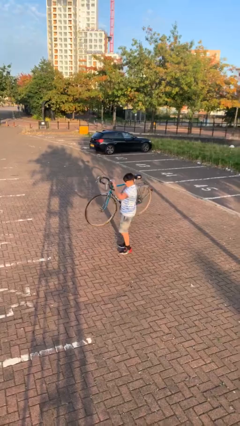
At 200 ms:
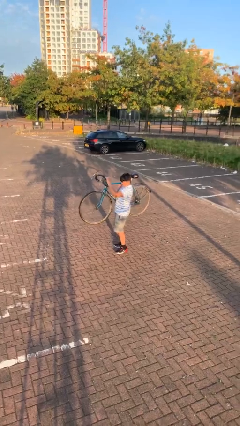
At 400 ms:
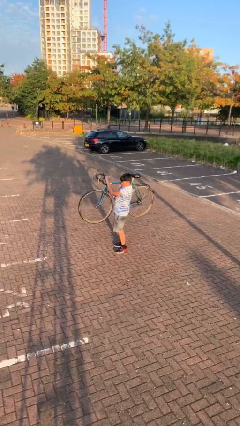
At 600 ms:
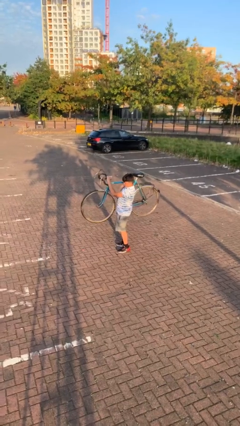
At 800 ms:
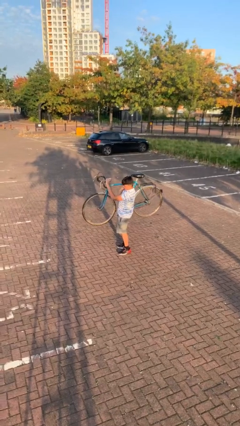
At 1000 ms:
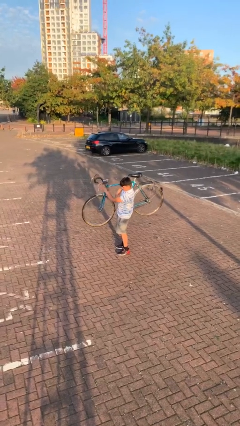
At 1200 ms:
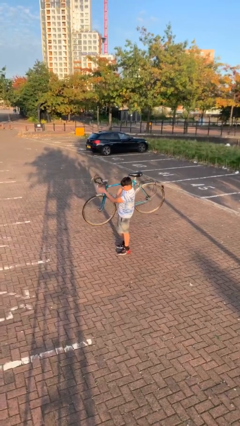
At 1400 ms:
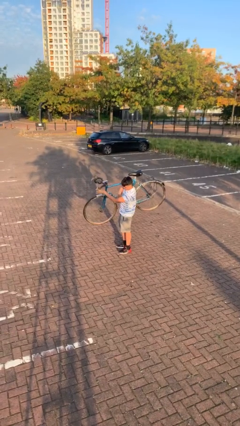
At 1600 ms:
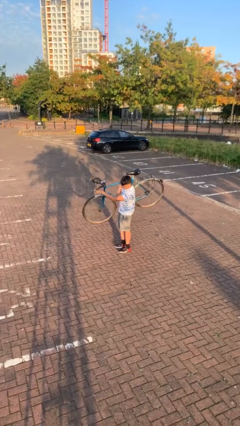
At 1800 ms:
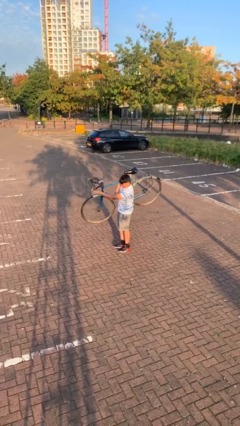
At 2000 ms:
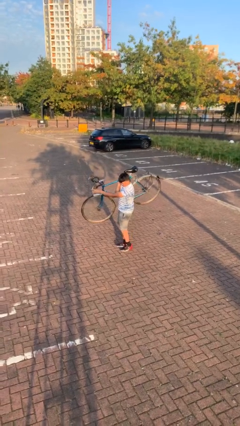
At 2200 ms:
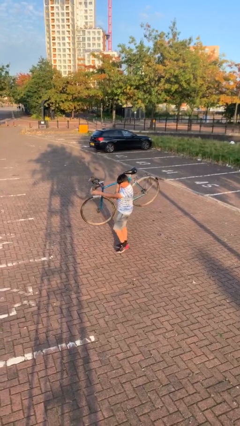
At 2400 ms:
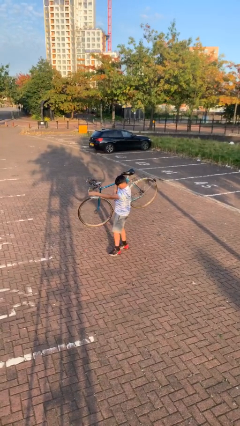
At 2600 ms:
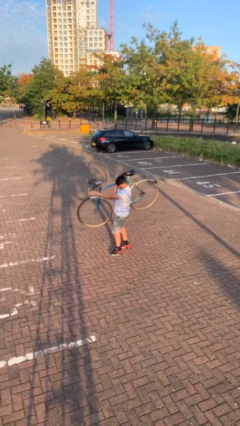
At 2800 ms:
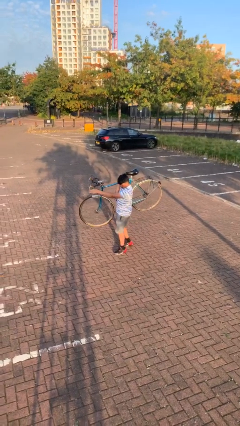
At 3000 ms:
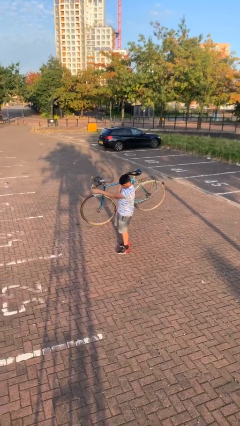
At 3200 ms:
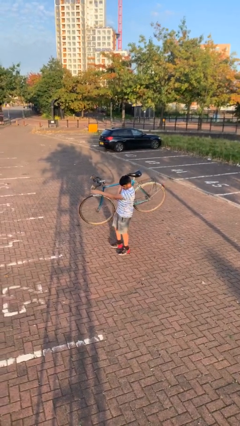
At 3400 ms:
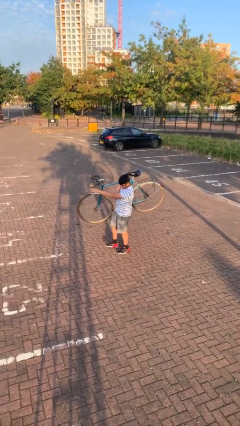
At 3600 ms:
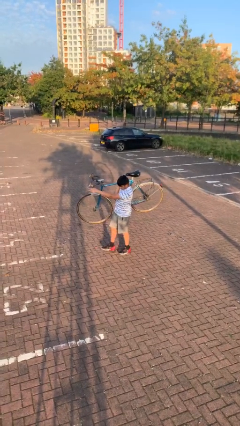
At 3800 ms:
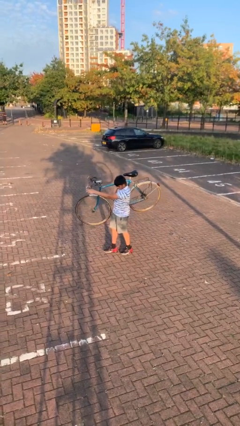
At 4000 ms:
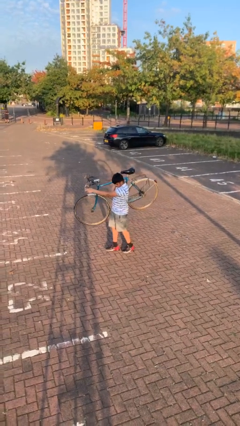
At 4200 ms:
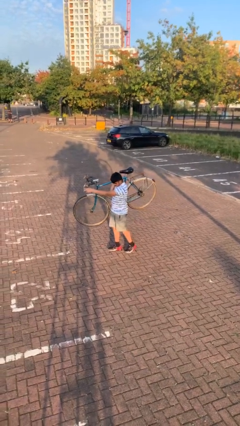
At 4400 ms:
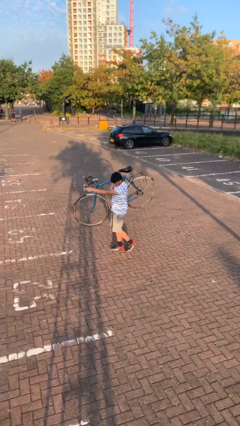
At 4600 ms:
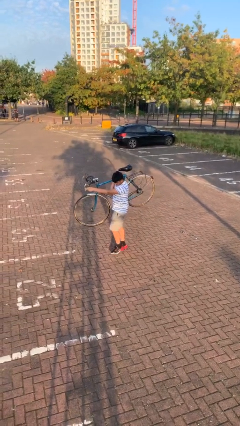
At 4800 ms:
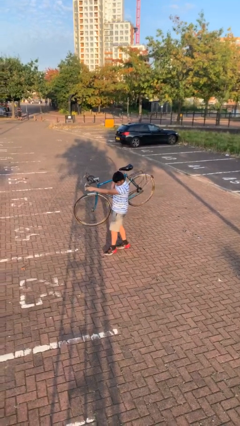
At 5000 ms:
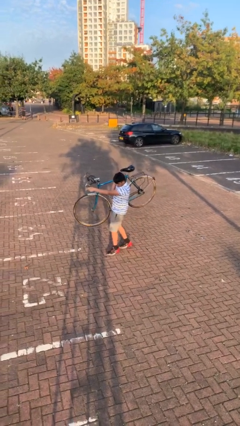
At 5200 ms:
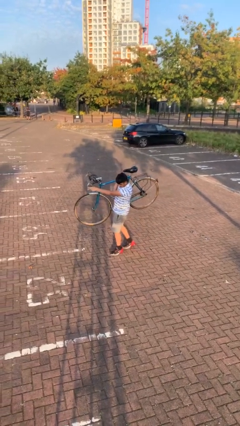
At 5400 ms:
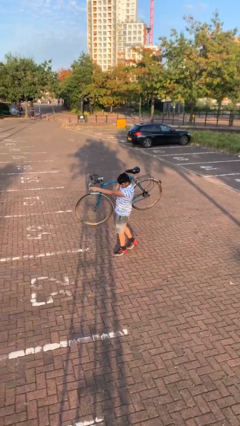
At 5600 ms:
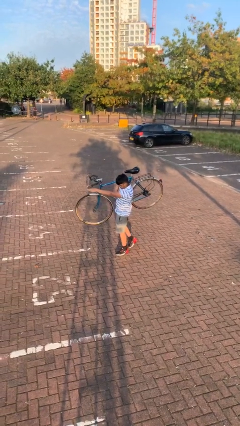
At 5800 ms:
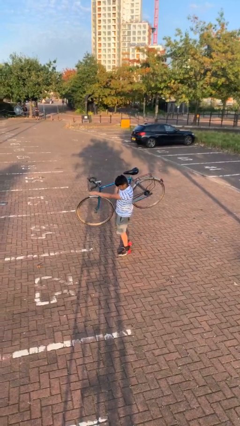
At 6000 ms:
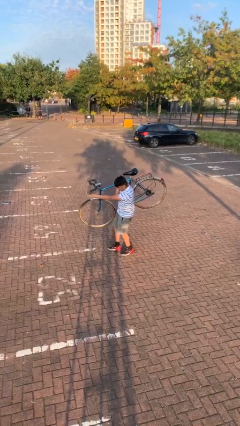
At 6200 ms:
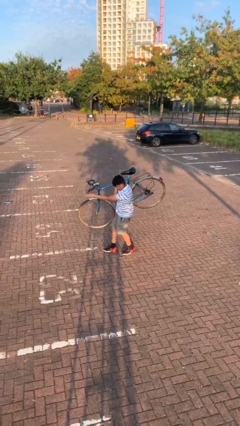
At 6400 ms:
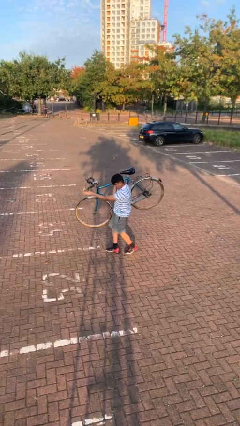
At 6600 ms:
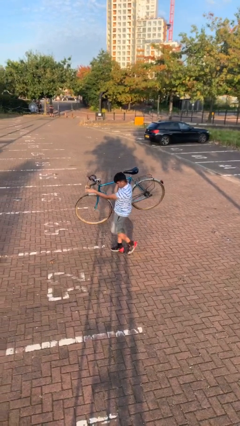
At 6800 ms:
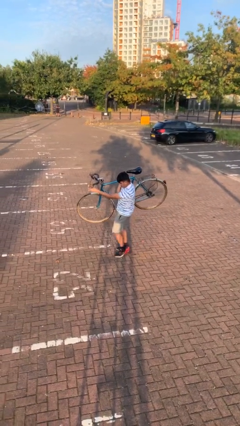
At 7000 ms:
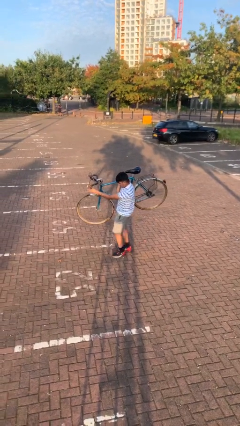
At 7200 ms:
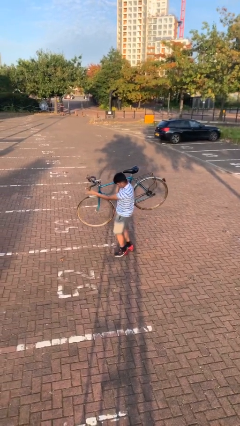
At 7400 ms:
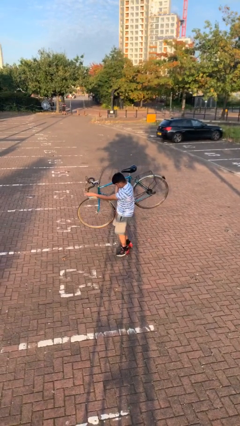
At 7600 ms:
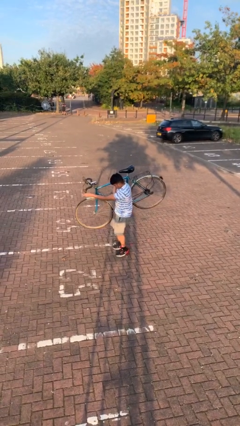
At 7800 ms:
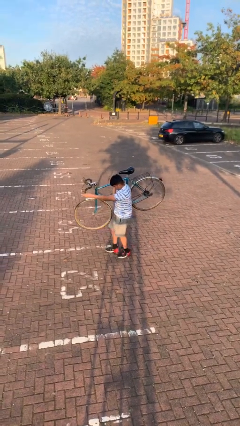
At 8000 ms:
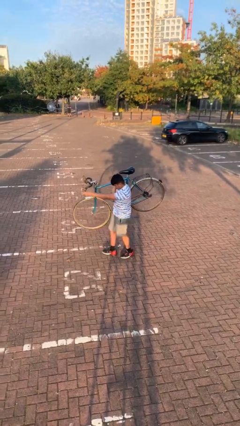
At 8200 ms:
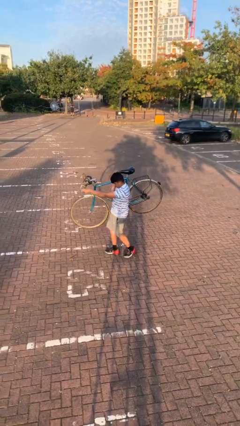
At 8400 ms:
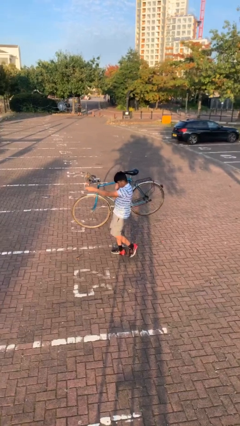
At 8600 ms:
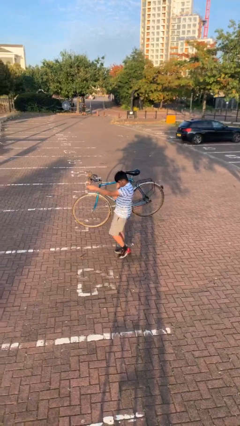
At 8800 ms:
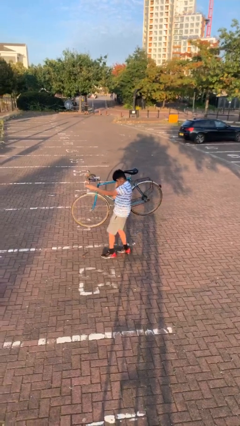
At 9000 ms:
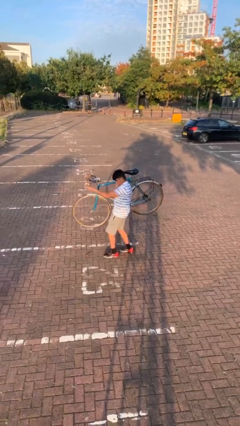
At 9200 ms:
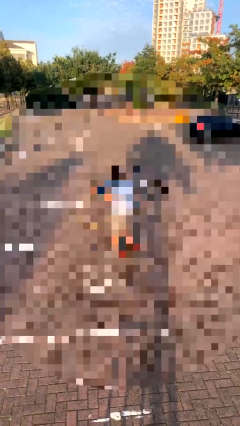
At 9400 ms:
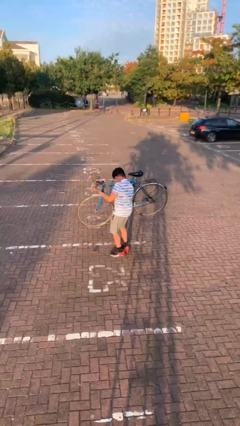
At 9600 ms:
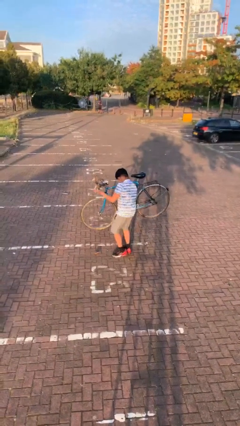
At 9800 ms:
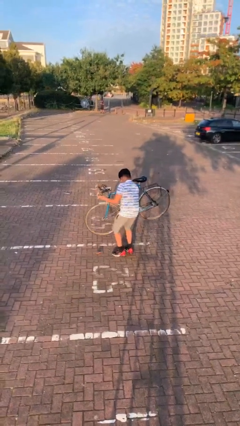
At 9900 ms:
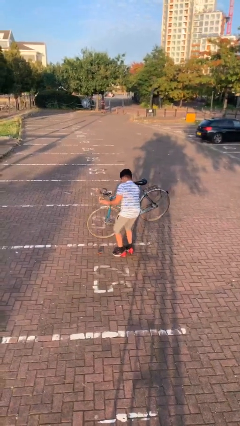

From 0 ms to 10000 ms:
person carries heavy object

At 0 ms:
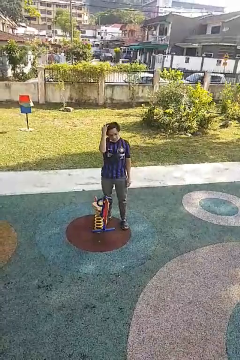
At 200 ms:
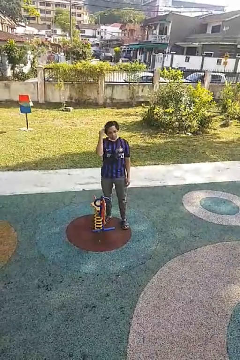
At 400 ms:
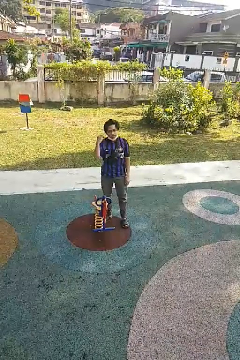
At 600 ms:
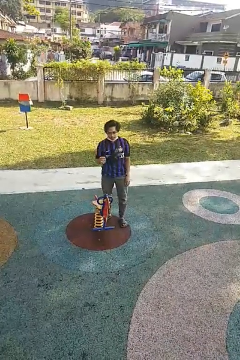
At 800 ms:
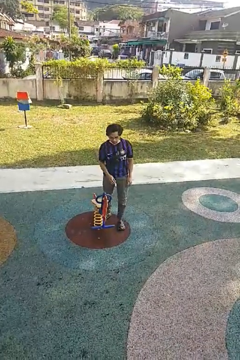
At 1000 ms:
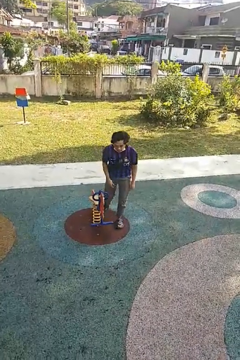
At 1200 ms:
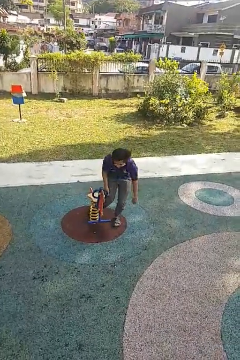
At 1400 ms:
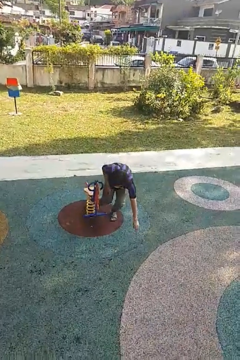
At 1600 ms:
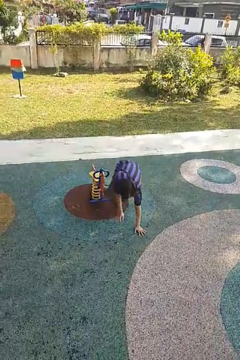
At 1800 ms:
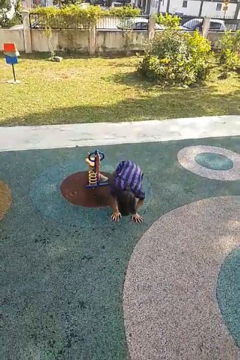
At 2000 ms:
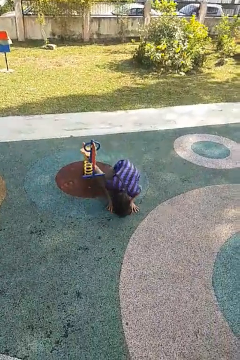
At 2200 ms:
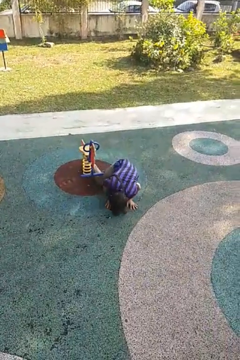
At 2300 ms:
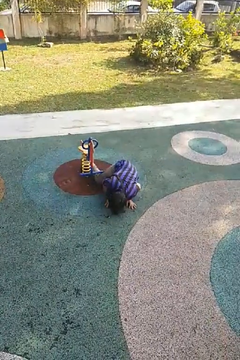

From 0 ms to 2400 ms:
person trips on object on floor

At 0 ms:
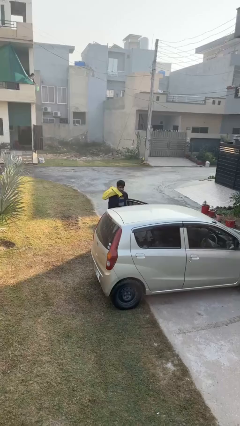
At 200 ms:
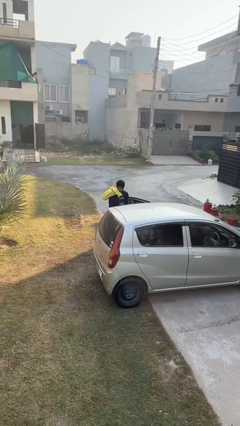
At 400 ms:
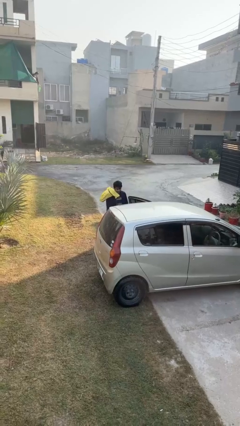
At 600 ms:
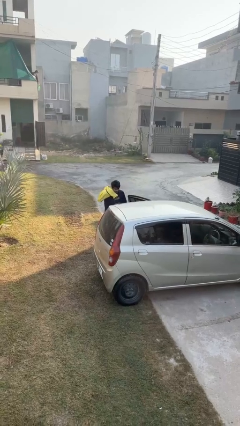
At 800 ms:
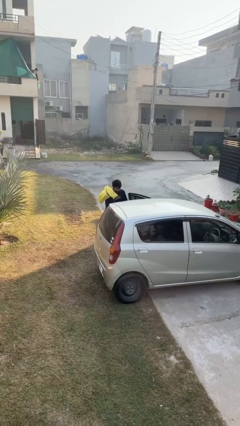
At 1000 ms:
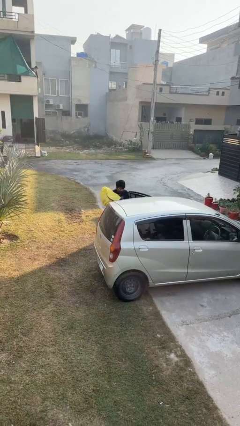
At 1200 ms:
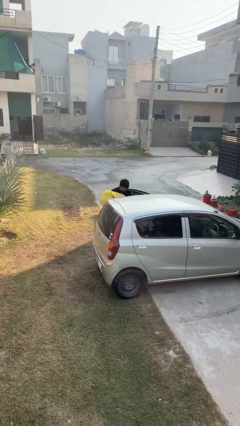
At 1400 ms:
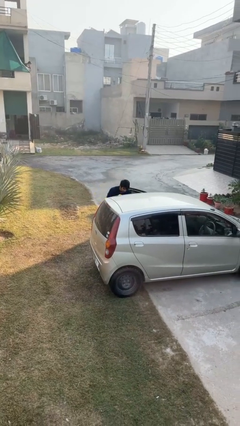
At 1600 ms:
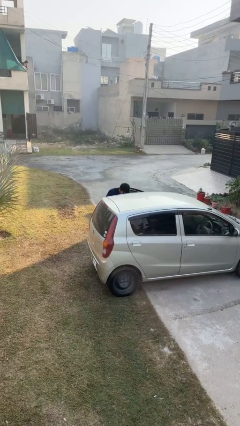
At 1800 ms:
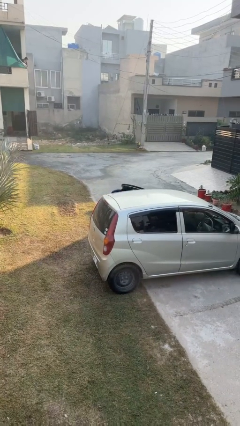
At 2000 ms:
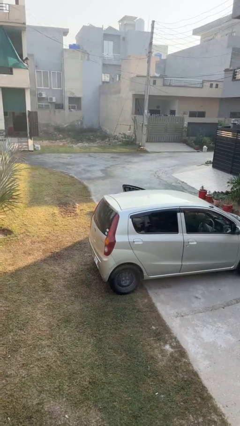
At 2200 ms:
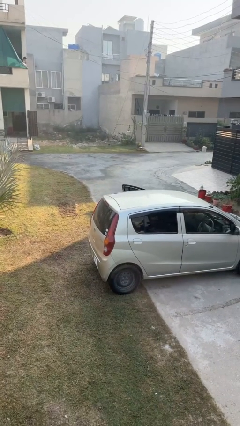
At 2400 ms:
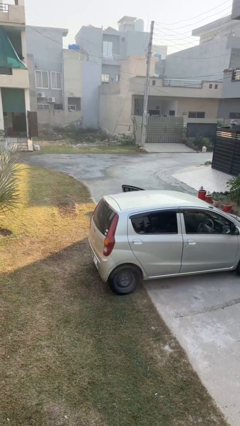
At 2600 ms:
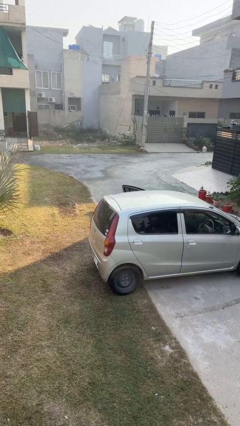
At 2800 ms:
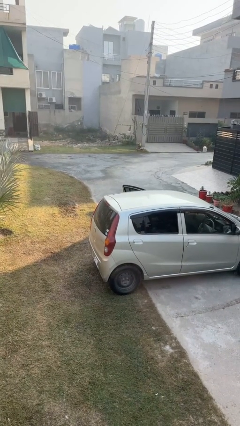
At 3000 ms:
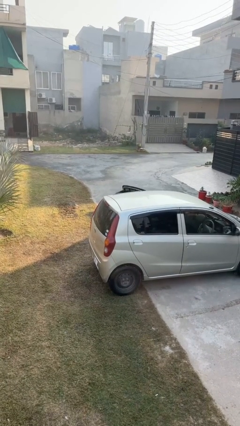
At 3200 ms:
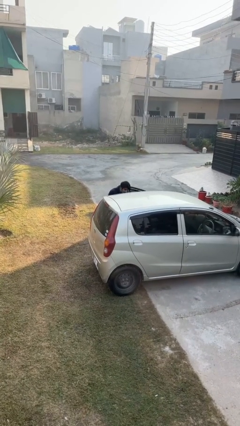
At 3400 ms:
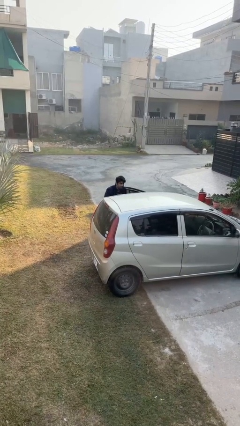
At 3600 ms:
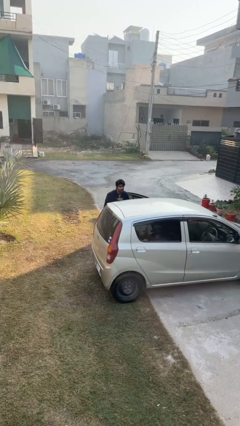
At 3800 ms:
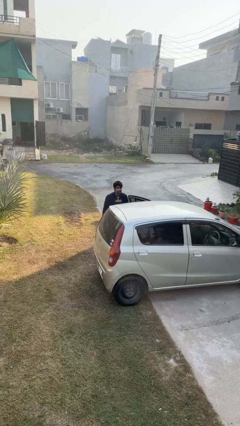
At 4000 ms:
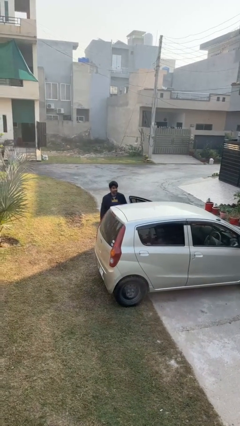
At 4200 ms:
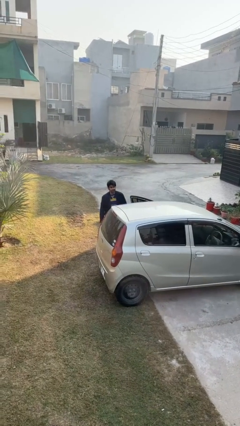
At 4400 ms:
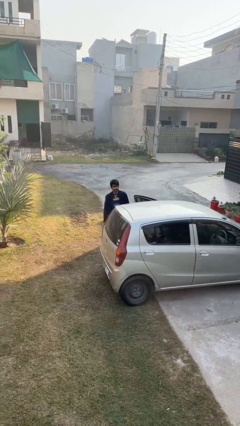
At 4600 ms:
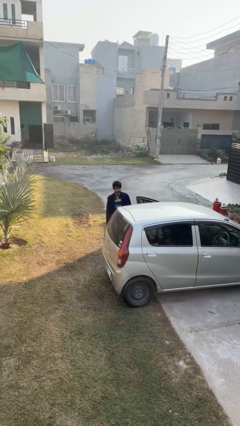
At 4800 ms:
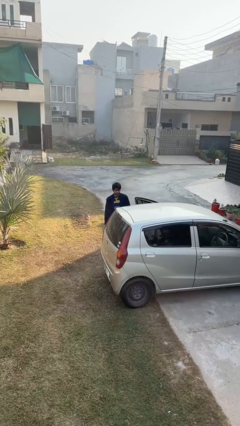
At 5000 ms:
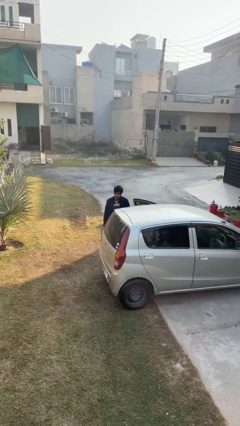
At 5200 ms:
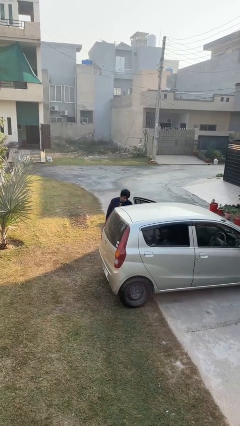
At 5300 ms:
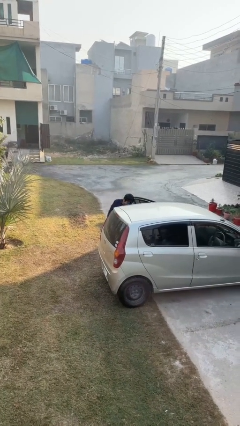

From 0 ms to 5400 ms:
person loads car

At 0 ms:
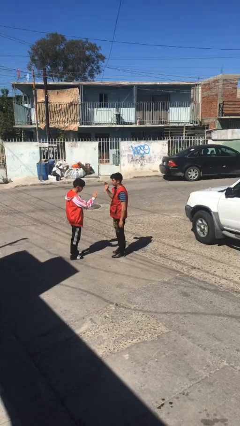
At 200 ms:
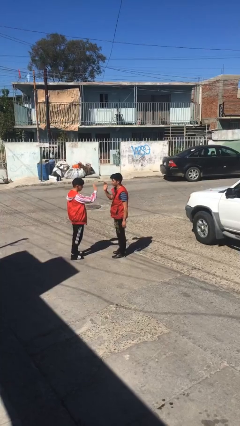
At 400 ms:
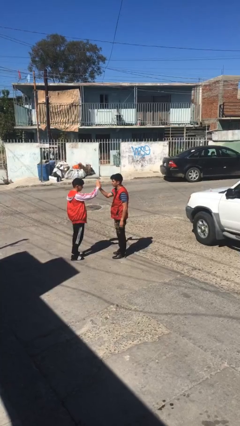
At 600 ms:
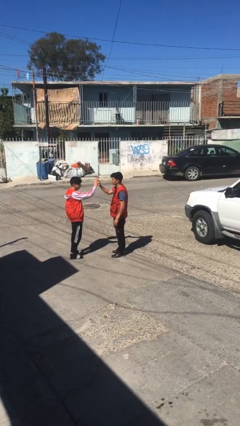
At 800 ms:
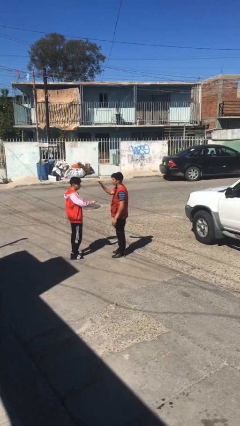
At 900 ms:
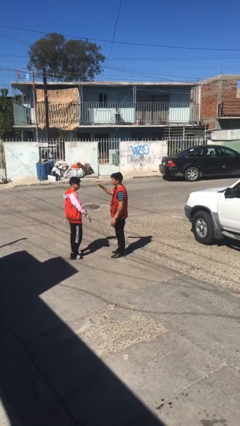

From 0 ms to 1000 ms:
person highfives hand
